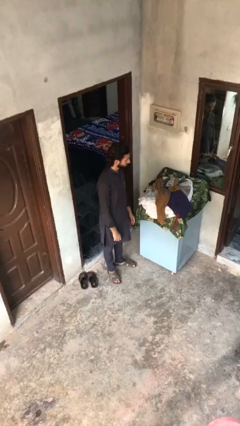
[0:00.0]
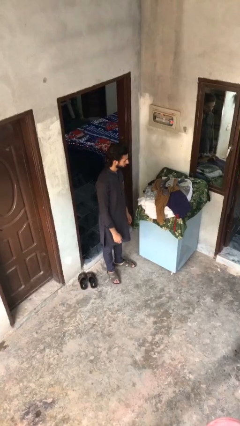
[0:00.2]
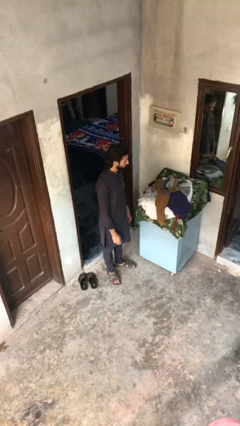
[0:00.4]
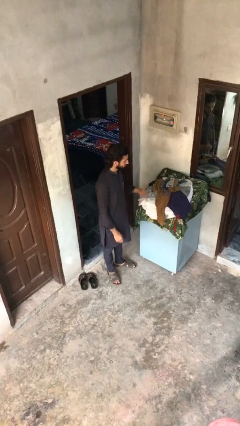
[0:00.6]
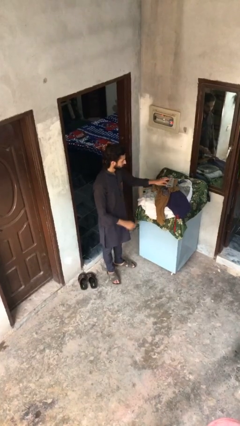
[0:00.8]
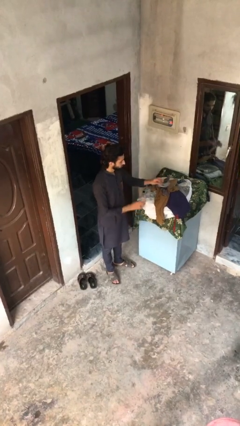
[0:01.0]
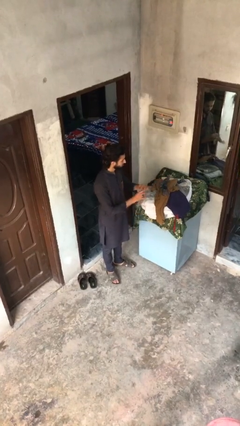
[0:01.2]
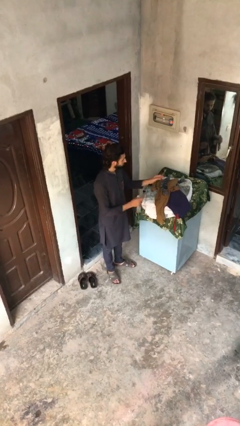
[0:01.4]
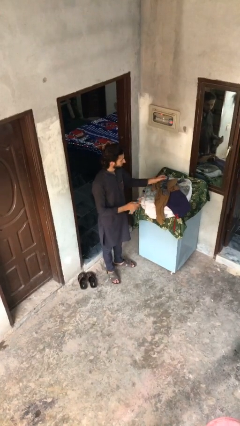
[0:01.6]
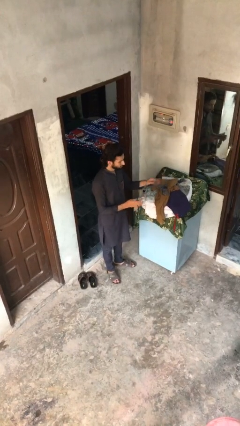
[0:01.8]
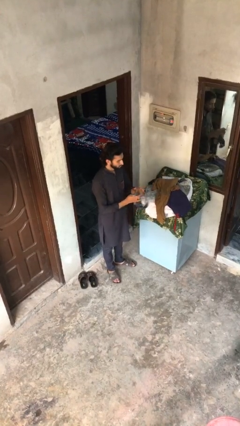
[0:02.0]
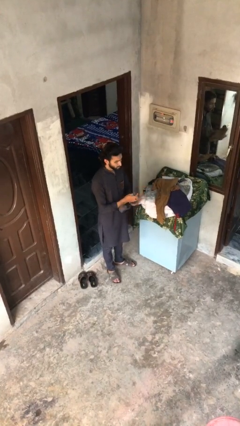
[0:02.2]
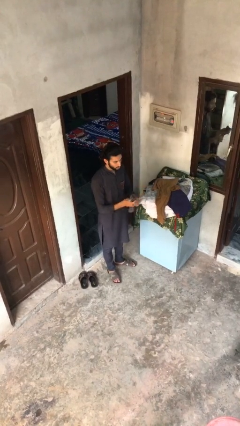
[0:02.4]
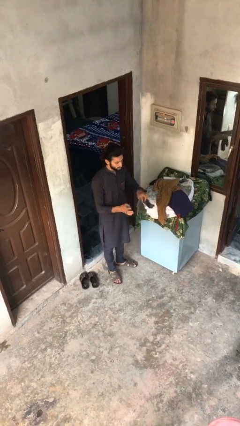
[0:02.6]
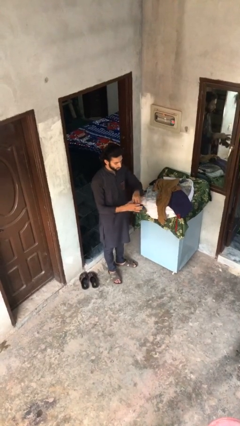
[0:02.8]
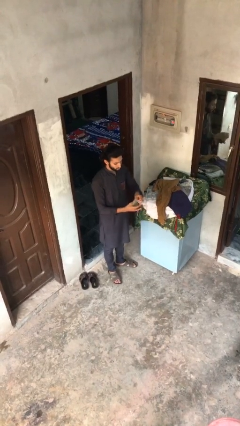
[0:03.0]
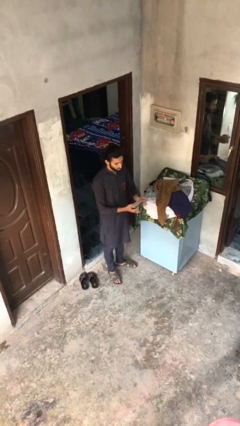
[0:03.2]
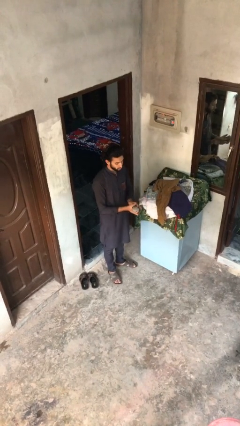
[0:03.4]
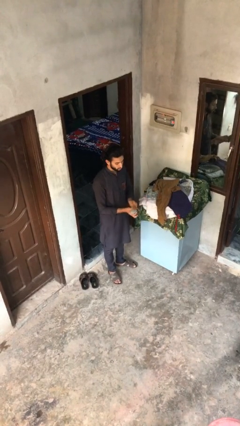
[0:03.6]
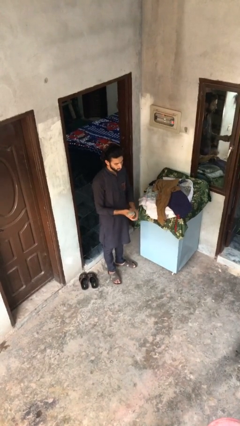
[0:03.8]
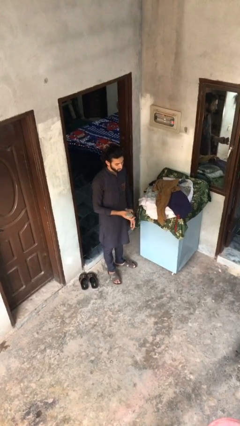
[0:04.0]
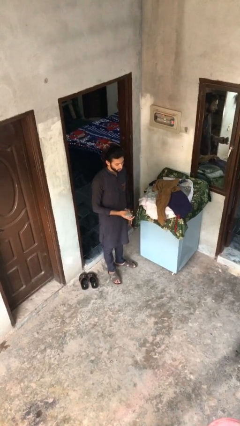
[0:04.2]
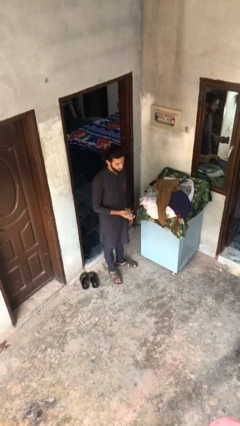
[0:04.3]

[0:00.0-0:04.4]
person folds socks

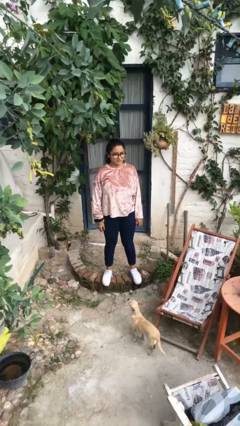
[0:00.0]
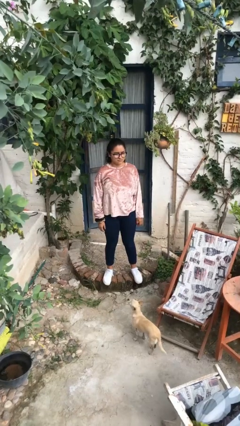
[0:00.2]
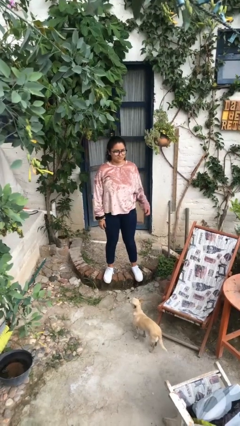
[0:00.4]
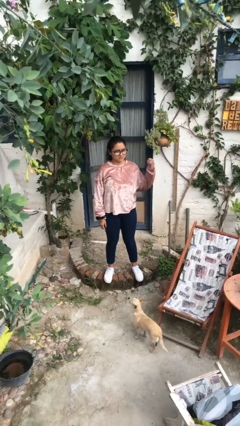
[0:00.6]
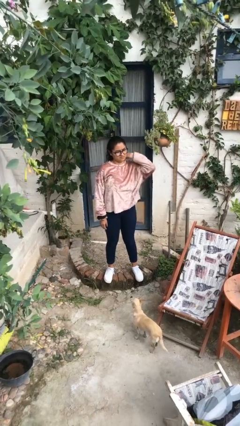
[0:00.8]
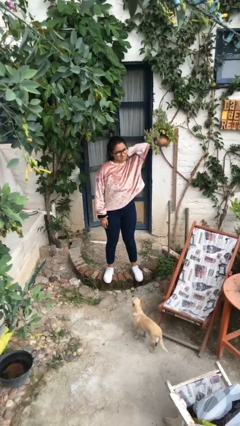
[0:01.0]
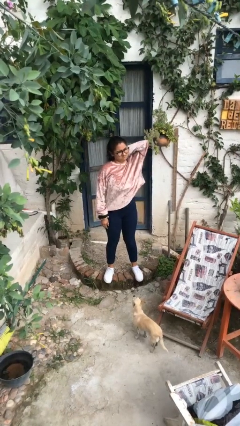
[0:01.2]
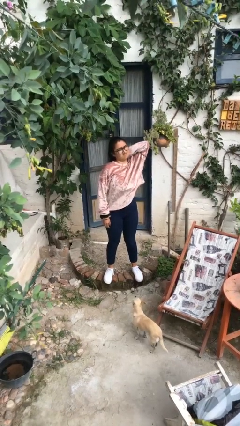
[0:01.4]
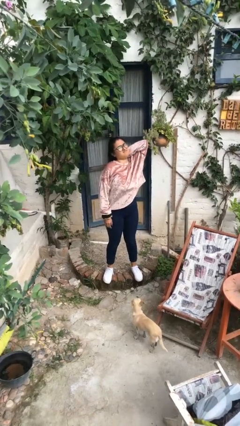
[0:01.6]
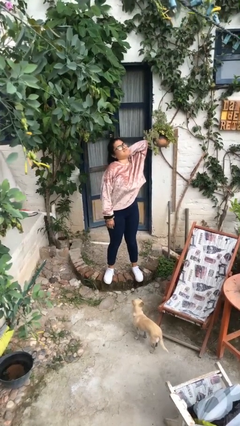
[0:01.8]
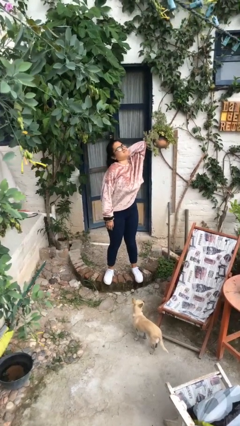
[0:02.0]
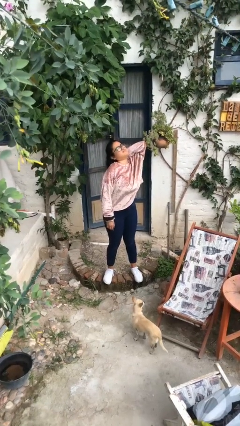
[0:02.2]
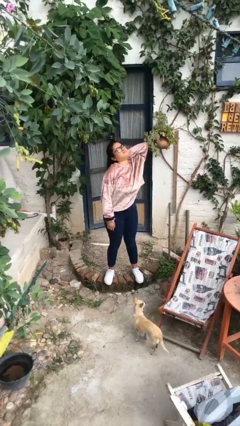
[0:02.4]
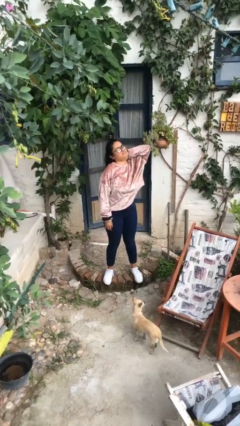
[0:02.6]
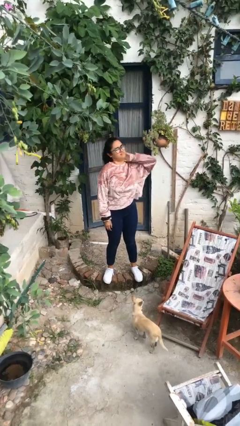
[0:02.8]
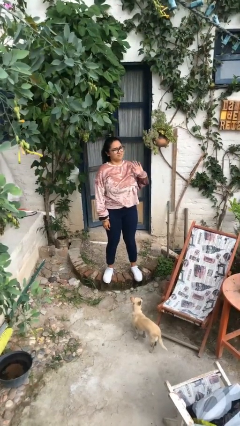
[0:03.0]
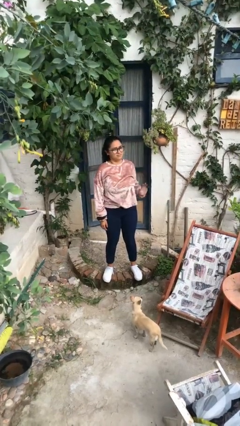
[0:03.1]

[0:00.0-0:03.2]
person rubs neck

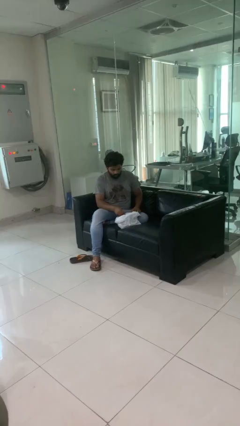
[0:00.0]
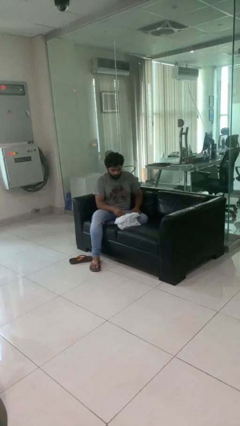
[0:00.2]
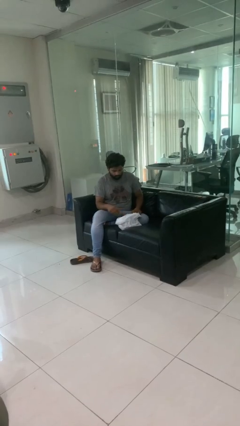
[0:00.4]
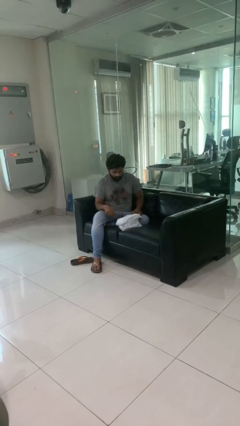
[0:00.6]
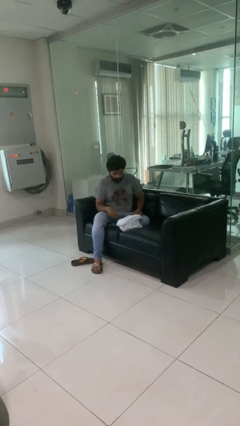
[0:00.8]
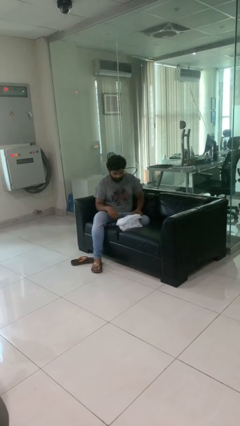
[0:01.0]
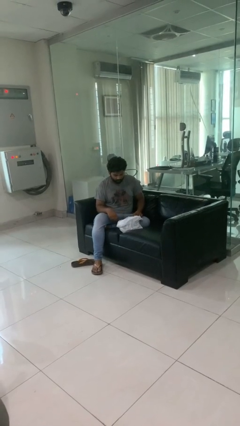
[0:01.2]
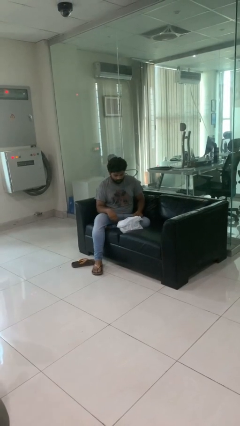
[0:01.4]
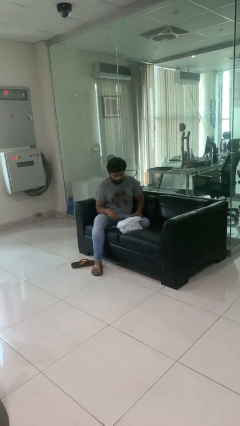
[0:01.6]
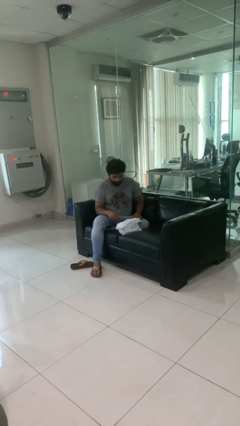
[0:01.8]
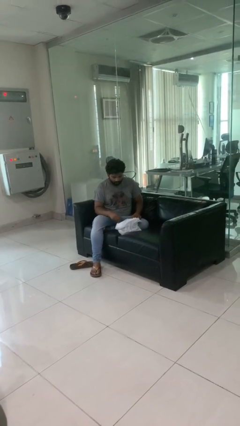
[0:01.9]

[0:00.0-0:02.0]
person puts object into bag

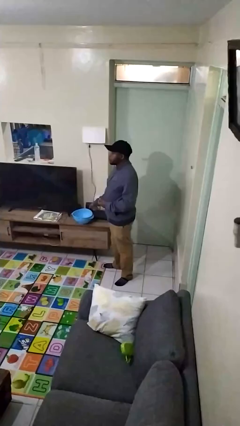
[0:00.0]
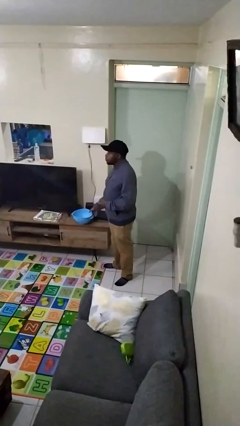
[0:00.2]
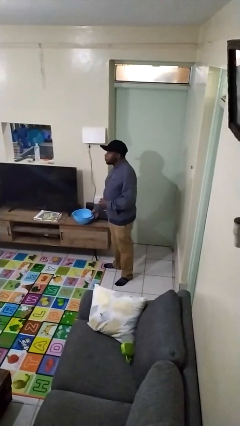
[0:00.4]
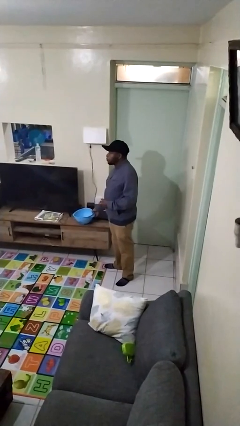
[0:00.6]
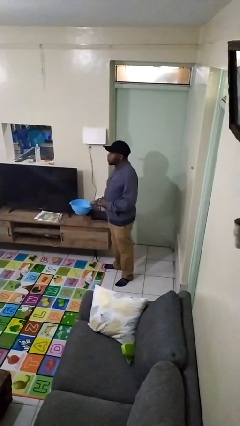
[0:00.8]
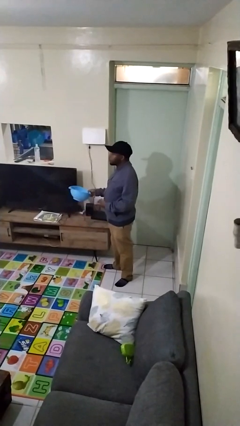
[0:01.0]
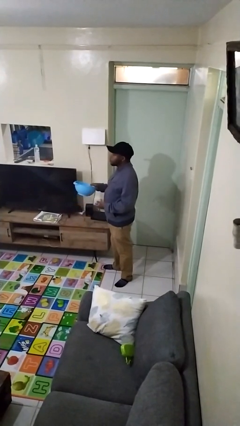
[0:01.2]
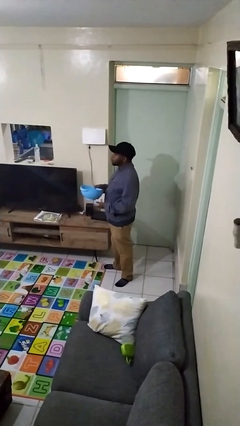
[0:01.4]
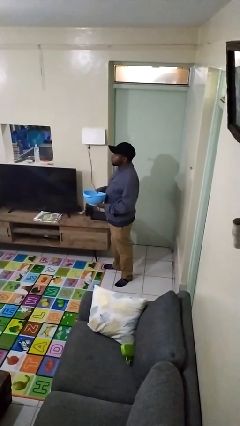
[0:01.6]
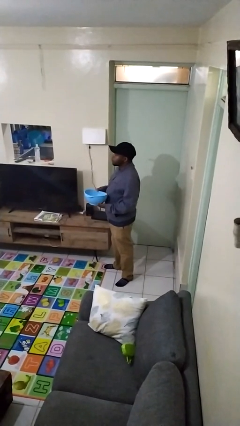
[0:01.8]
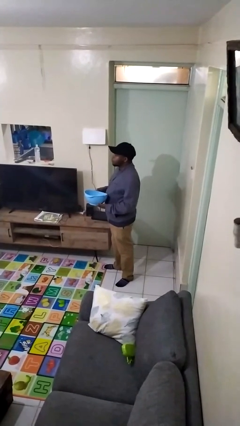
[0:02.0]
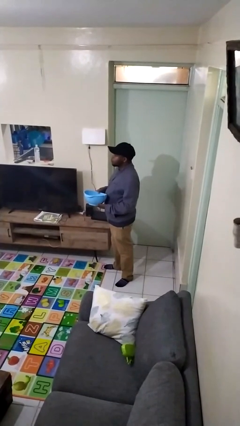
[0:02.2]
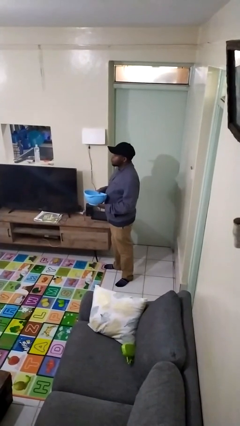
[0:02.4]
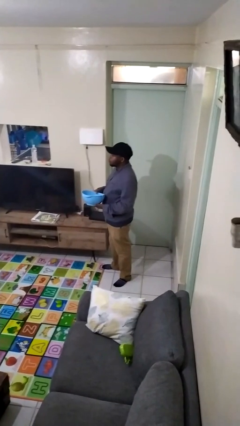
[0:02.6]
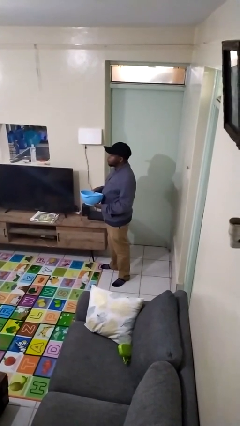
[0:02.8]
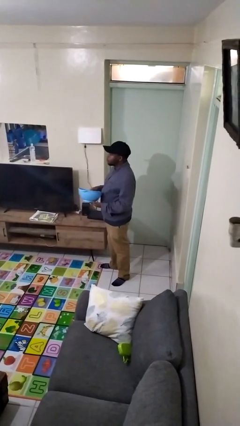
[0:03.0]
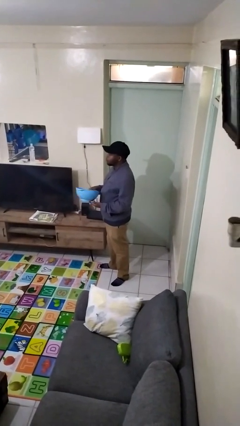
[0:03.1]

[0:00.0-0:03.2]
person picks up object from countertop

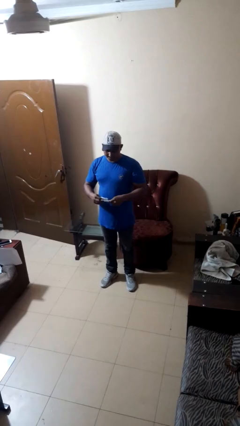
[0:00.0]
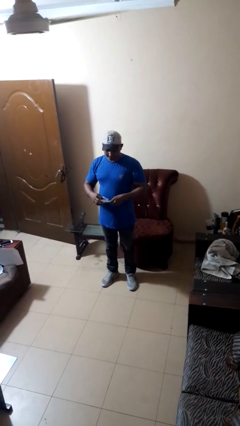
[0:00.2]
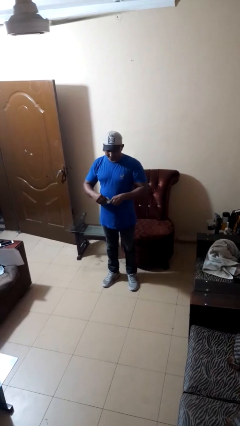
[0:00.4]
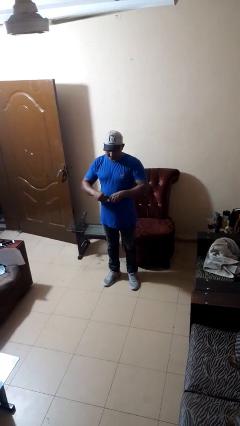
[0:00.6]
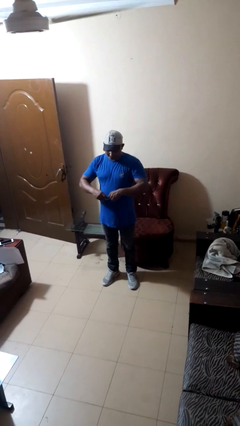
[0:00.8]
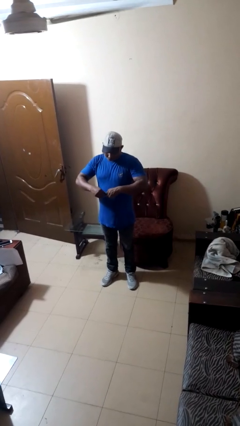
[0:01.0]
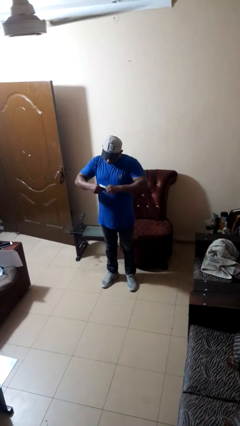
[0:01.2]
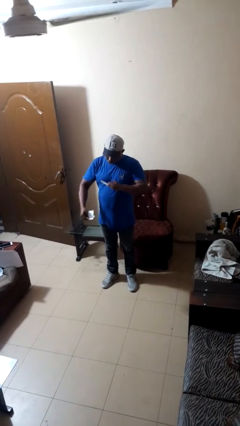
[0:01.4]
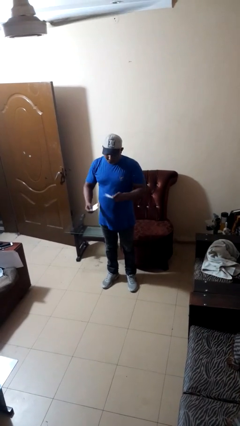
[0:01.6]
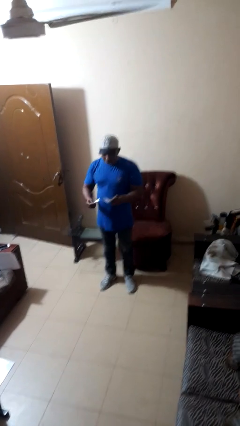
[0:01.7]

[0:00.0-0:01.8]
person tears paper

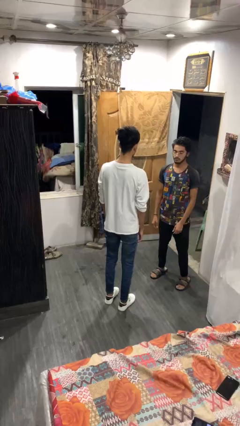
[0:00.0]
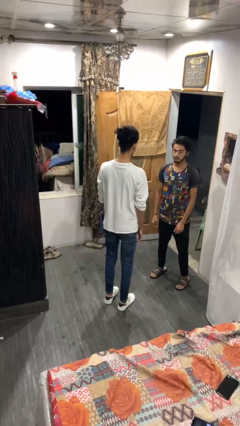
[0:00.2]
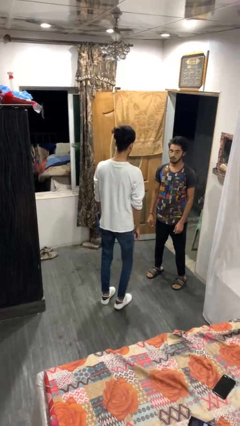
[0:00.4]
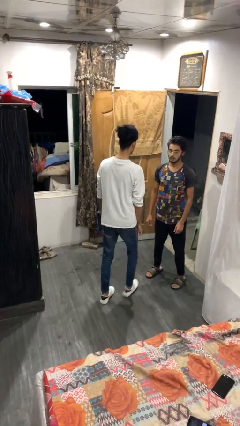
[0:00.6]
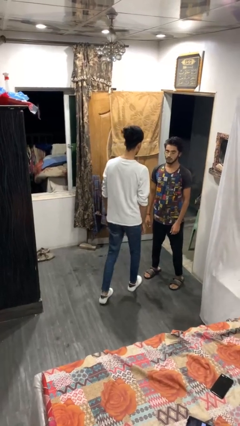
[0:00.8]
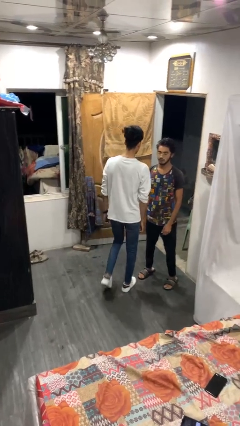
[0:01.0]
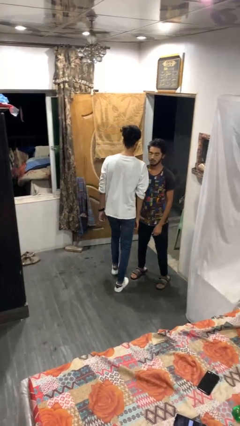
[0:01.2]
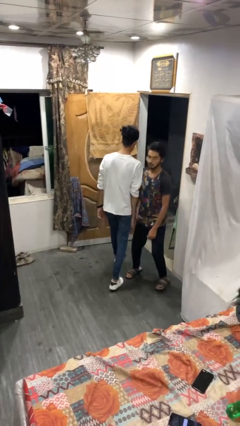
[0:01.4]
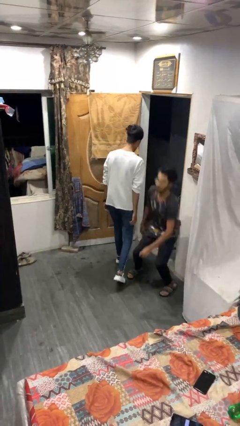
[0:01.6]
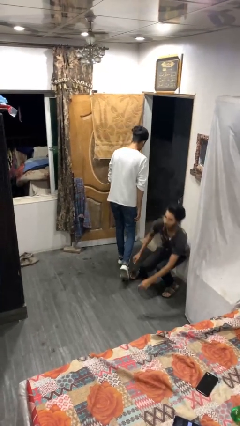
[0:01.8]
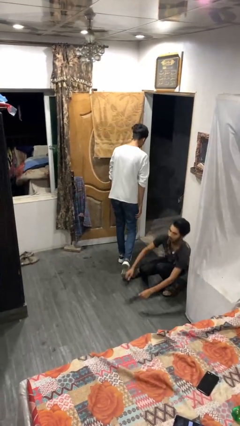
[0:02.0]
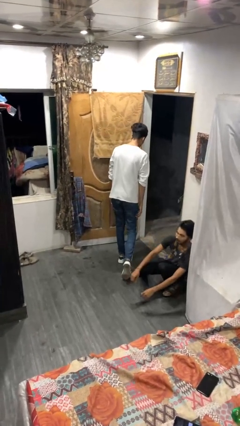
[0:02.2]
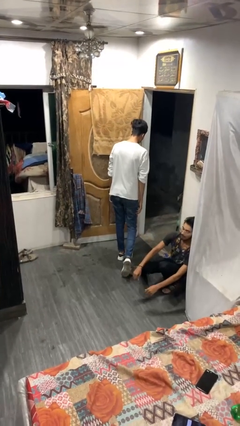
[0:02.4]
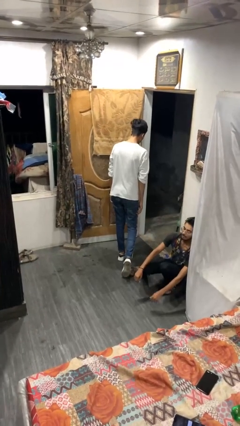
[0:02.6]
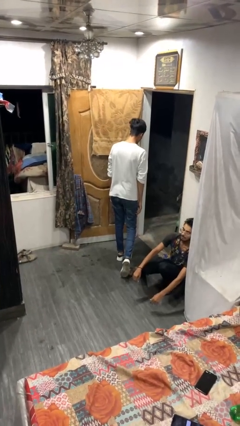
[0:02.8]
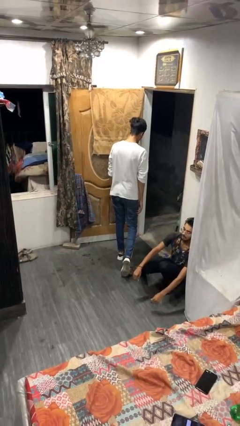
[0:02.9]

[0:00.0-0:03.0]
person bumps into person
